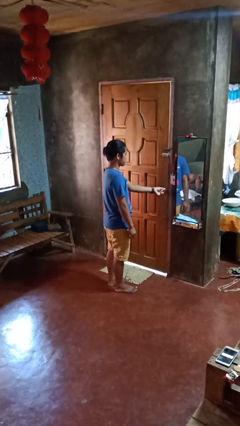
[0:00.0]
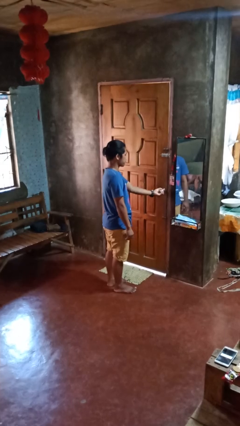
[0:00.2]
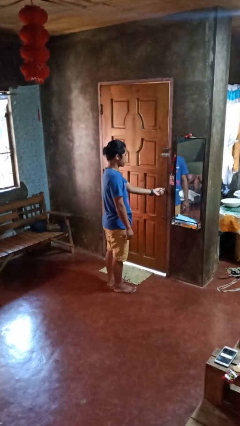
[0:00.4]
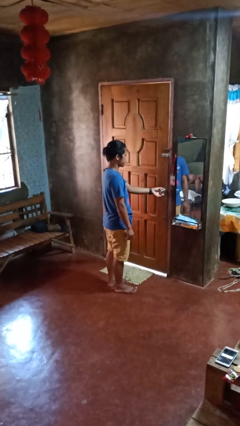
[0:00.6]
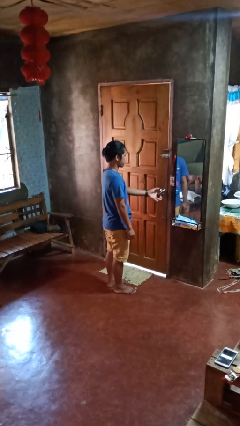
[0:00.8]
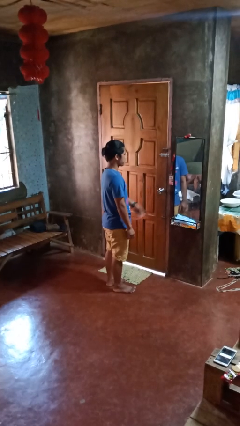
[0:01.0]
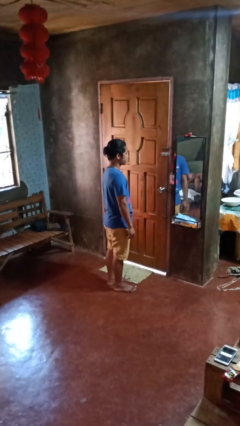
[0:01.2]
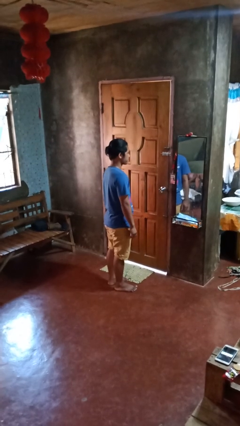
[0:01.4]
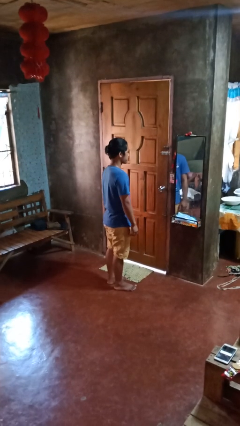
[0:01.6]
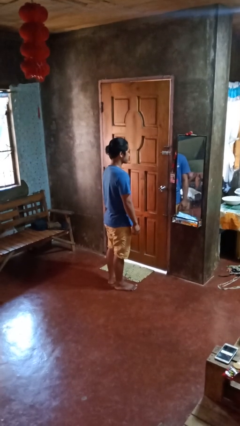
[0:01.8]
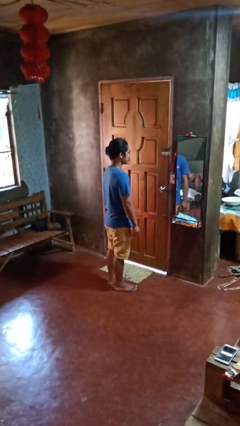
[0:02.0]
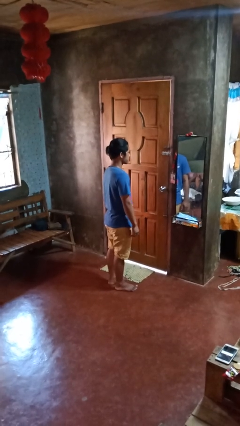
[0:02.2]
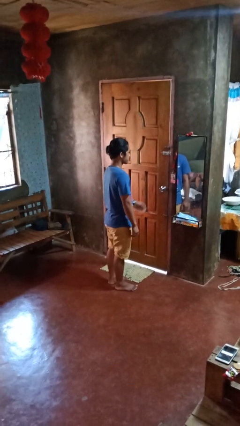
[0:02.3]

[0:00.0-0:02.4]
person unlocks door with keys

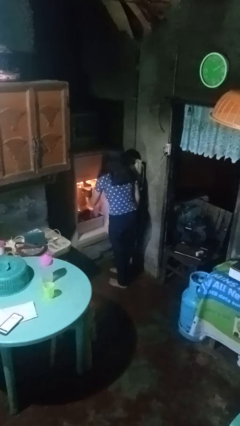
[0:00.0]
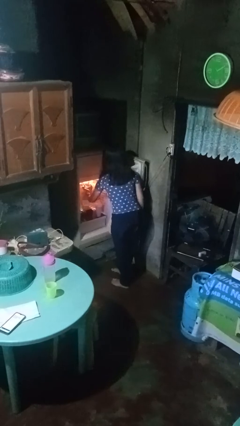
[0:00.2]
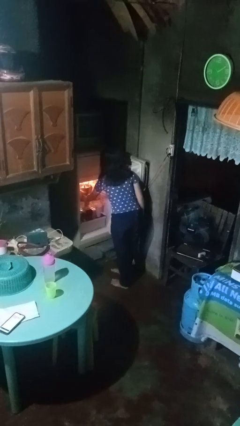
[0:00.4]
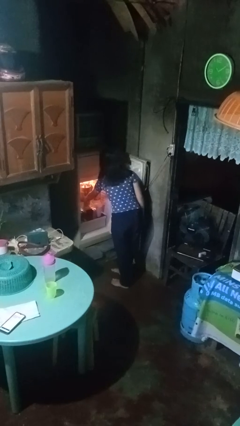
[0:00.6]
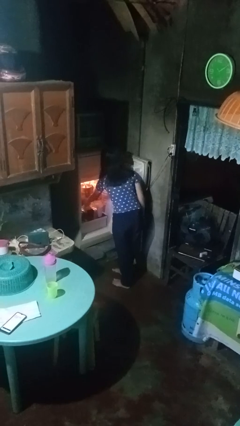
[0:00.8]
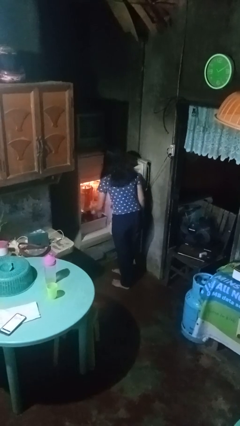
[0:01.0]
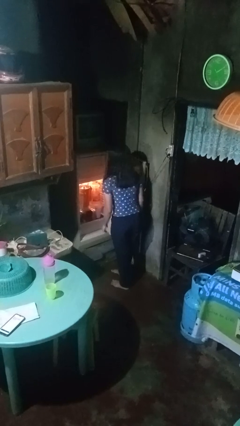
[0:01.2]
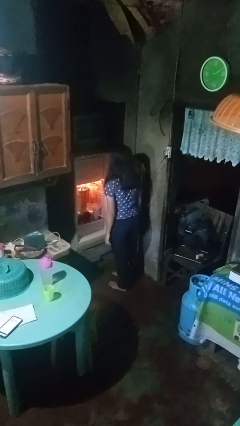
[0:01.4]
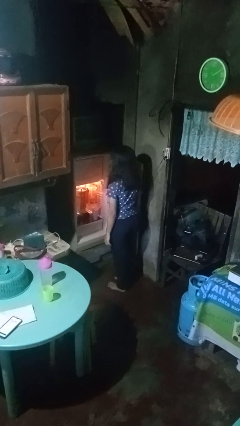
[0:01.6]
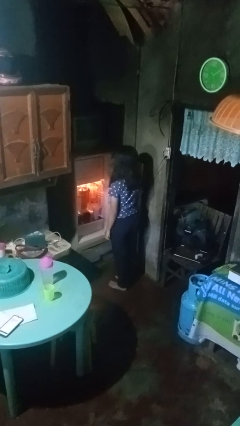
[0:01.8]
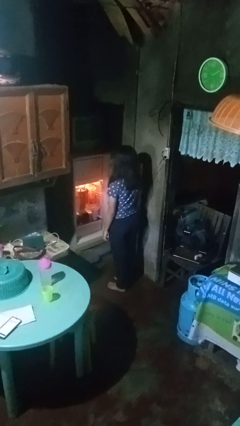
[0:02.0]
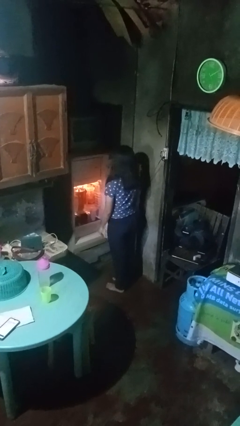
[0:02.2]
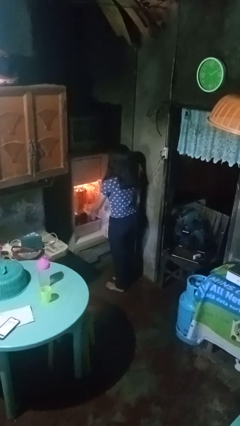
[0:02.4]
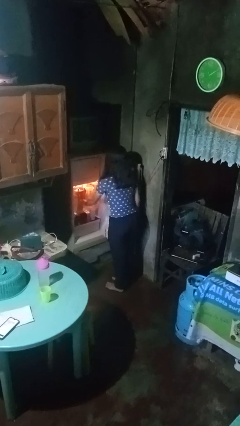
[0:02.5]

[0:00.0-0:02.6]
person puts object into refrigerator

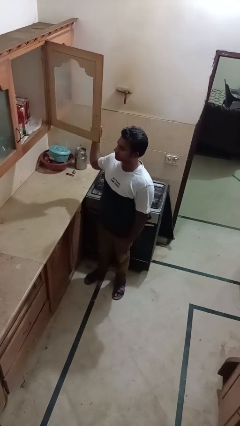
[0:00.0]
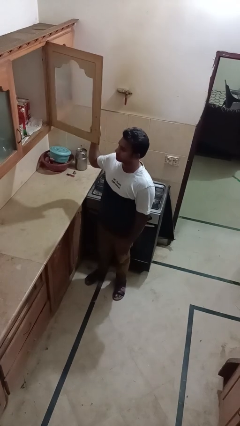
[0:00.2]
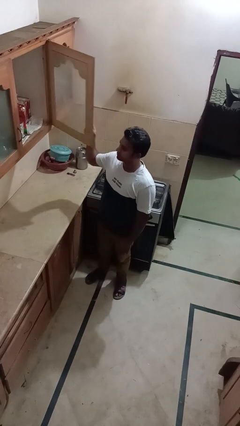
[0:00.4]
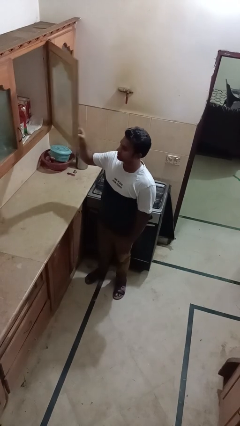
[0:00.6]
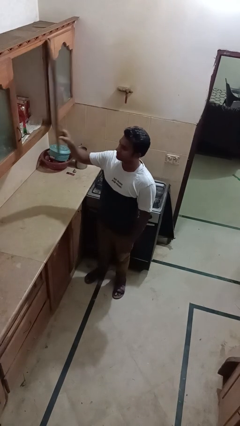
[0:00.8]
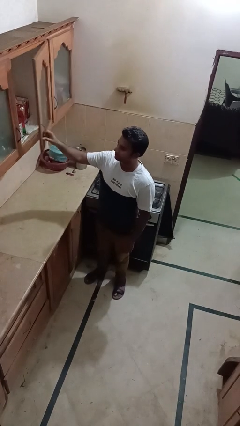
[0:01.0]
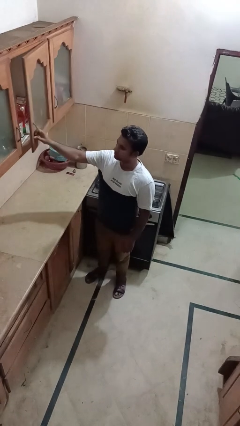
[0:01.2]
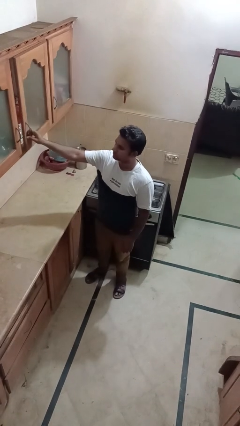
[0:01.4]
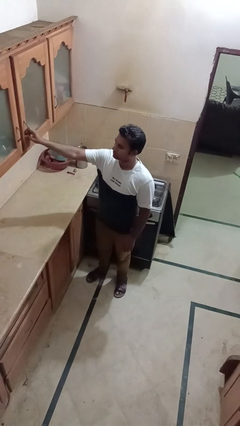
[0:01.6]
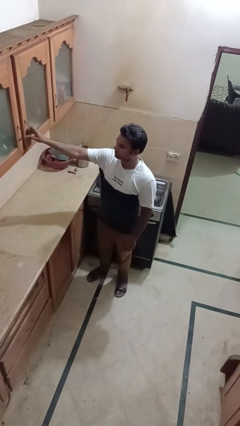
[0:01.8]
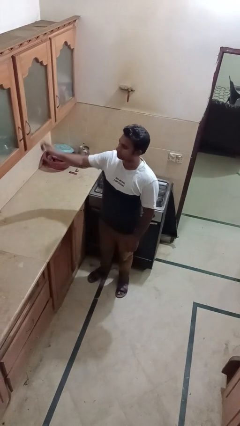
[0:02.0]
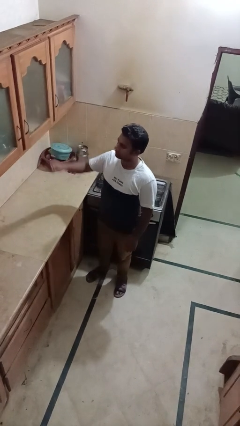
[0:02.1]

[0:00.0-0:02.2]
person closes cabinet

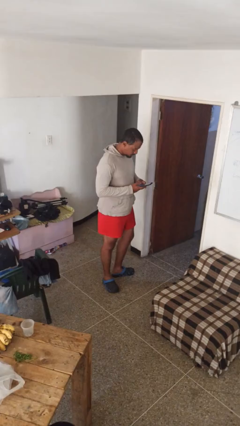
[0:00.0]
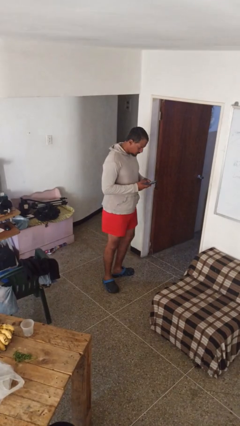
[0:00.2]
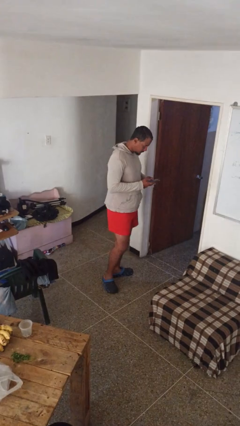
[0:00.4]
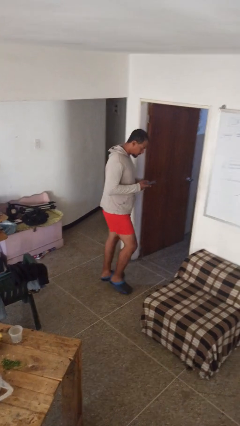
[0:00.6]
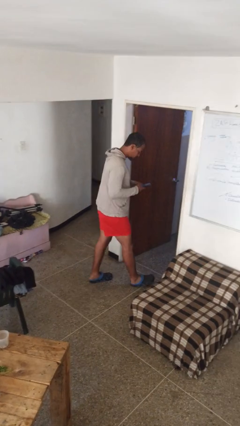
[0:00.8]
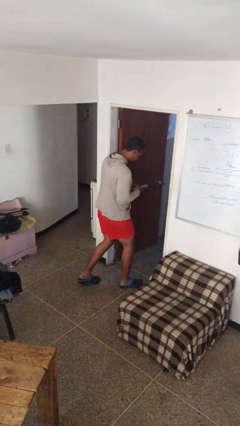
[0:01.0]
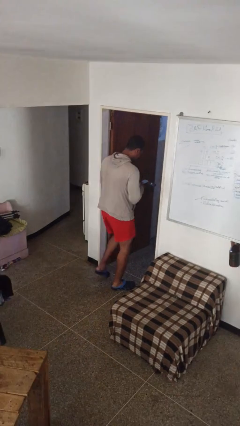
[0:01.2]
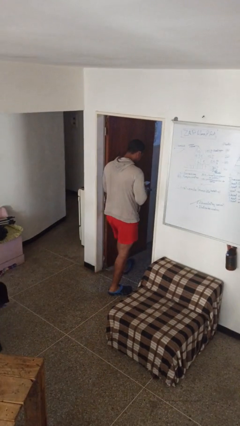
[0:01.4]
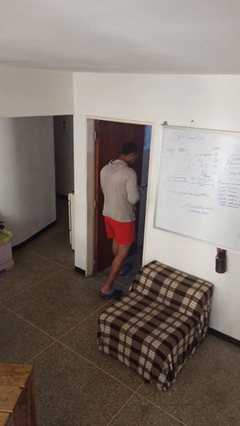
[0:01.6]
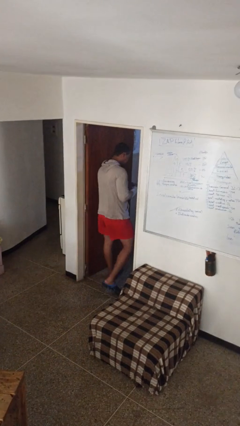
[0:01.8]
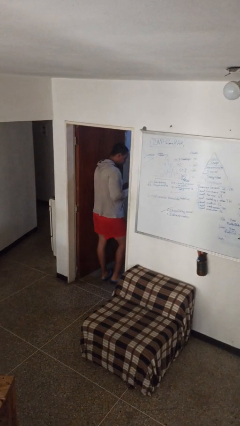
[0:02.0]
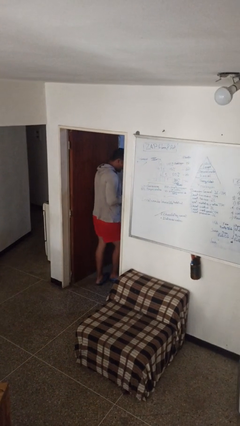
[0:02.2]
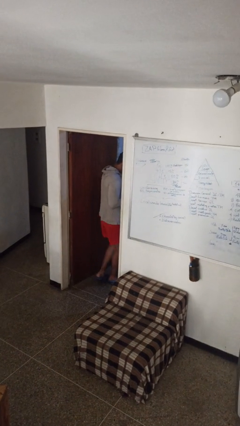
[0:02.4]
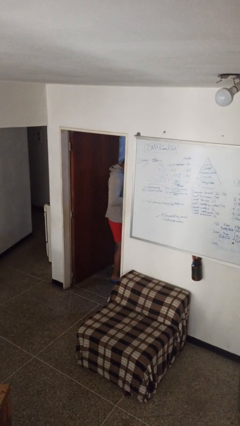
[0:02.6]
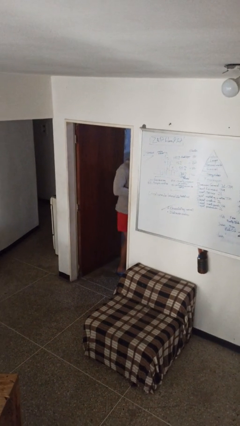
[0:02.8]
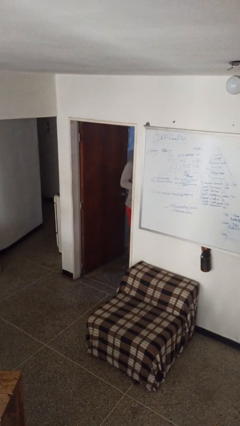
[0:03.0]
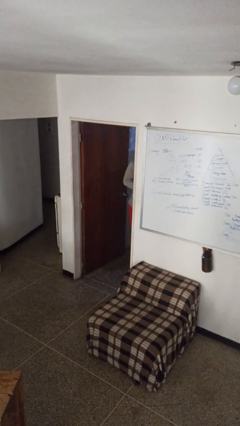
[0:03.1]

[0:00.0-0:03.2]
person exits scene through structure

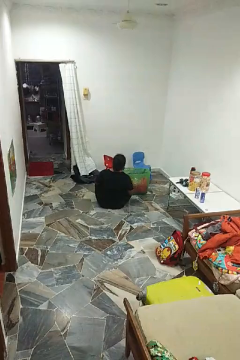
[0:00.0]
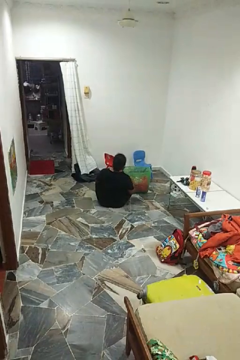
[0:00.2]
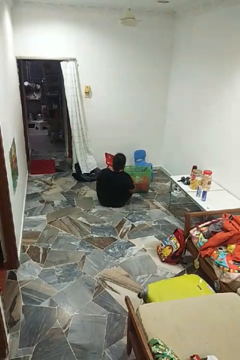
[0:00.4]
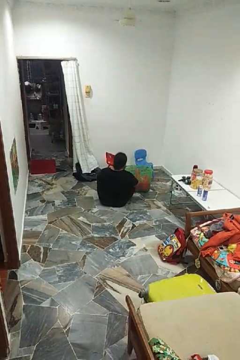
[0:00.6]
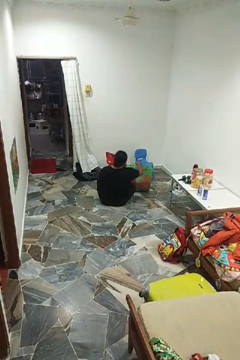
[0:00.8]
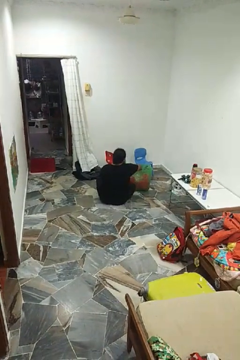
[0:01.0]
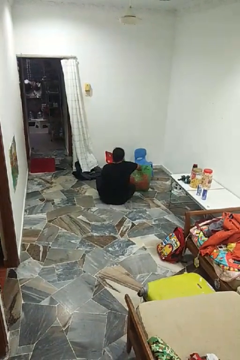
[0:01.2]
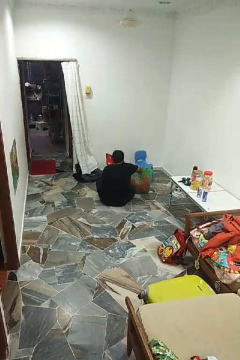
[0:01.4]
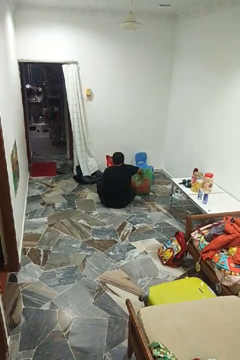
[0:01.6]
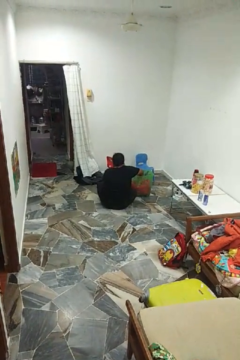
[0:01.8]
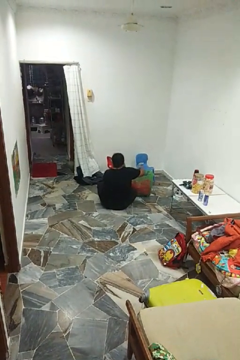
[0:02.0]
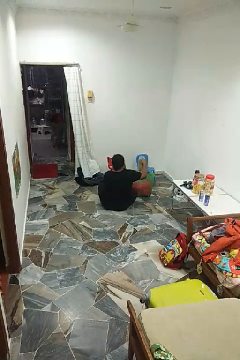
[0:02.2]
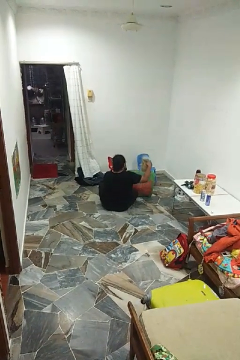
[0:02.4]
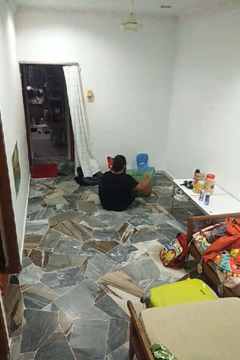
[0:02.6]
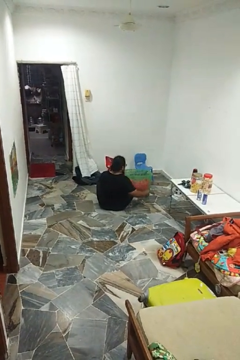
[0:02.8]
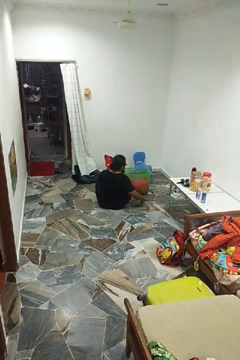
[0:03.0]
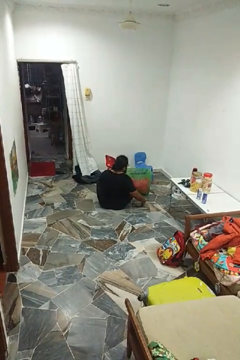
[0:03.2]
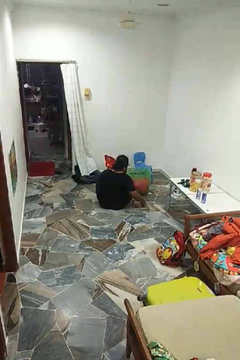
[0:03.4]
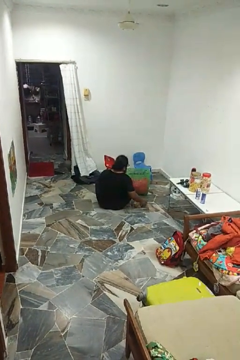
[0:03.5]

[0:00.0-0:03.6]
person takes object from basket

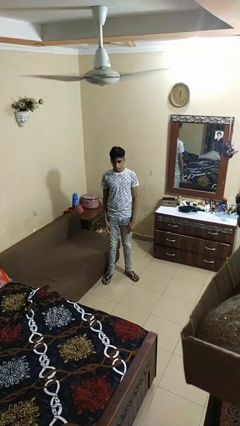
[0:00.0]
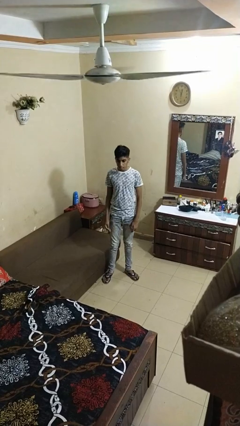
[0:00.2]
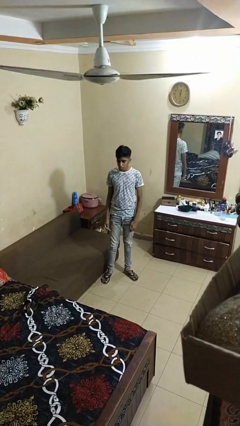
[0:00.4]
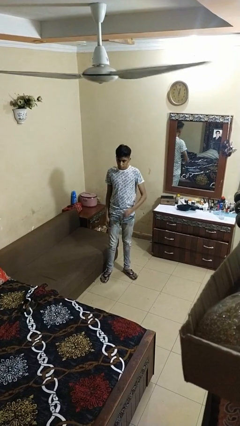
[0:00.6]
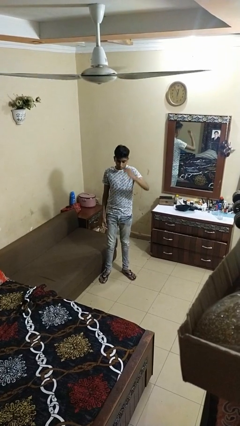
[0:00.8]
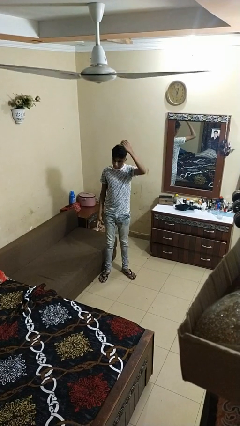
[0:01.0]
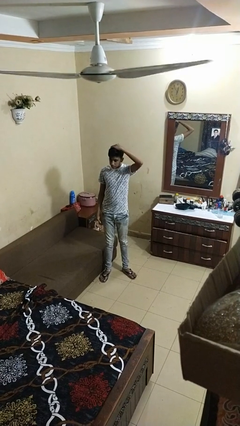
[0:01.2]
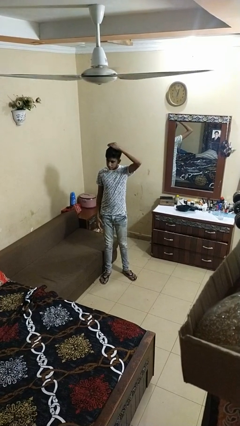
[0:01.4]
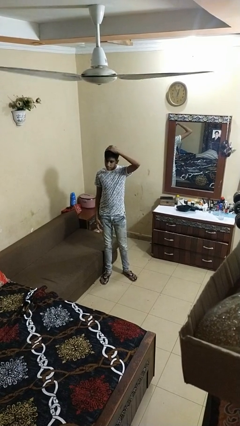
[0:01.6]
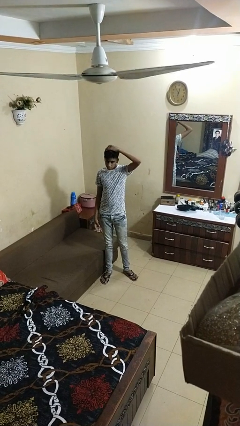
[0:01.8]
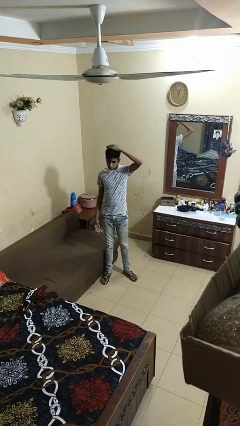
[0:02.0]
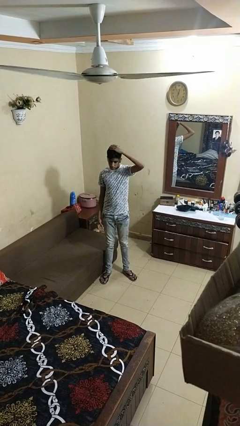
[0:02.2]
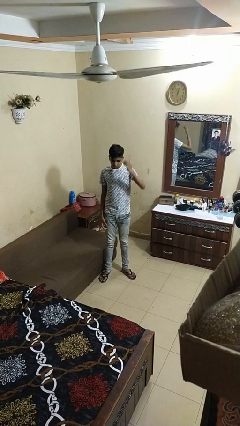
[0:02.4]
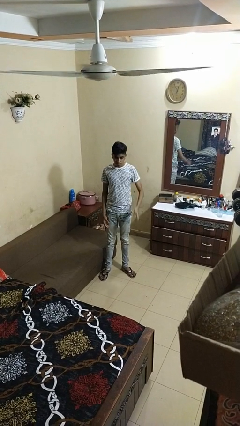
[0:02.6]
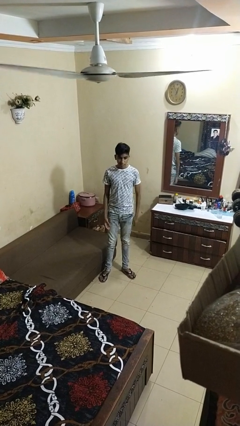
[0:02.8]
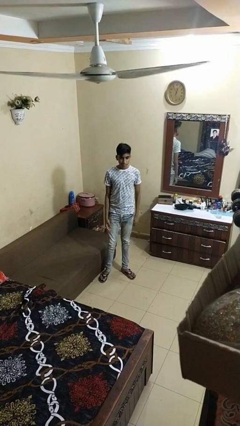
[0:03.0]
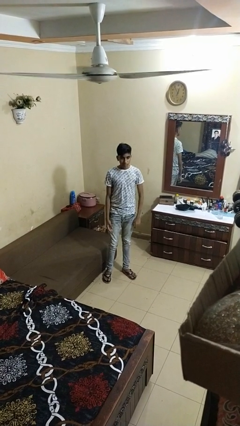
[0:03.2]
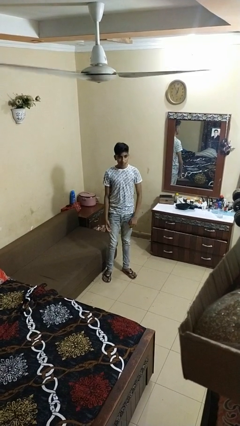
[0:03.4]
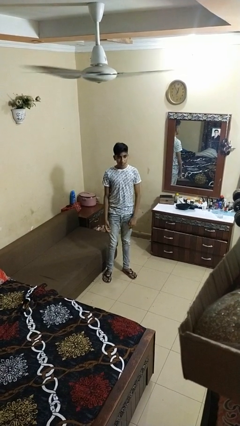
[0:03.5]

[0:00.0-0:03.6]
person pats head

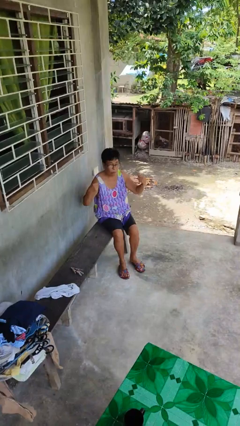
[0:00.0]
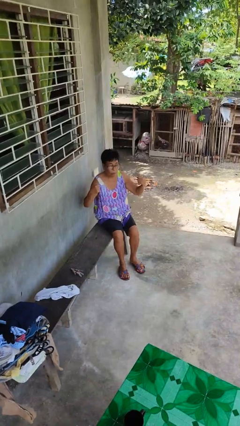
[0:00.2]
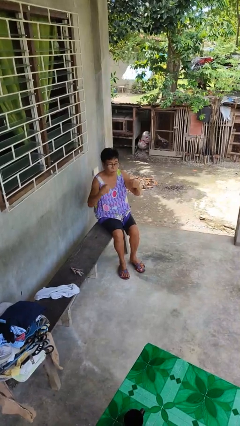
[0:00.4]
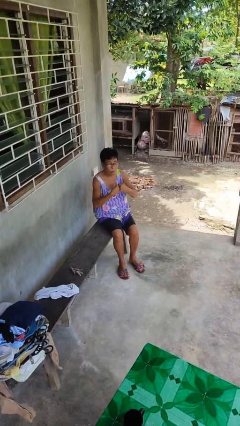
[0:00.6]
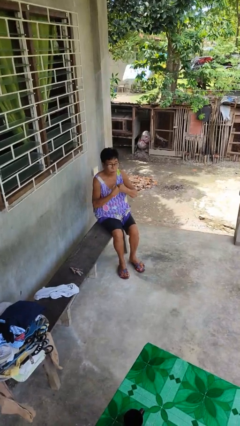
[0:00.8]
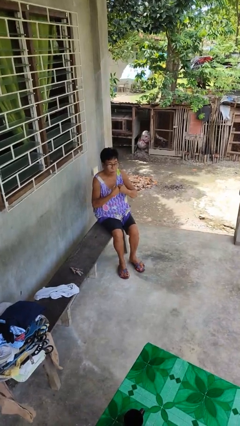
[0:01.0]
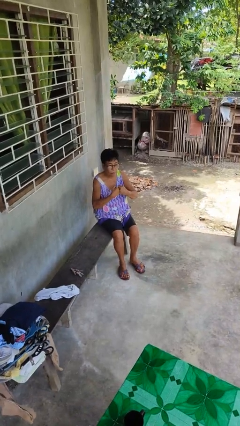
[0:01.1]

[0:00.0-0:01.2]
person gestures zoom out
